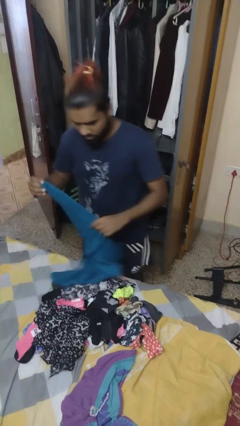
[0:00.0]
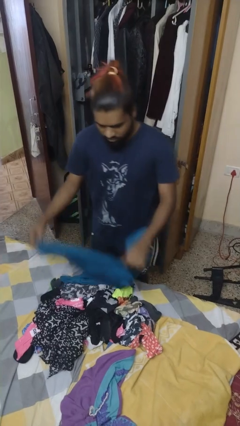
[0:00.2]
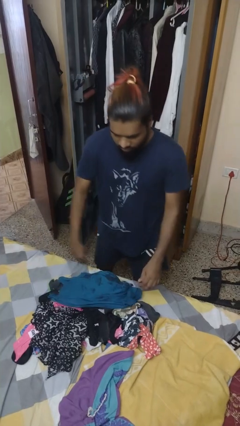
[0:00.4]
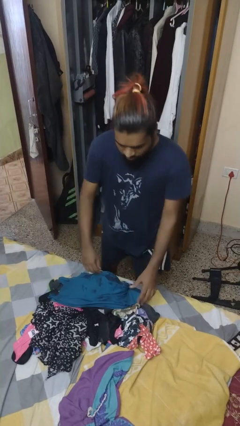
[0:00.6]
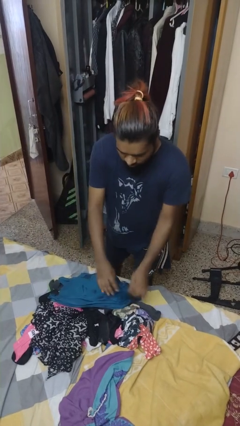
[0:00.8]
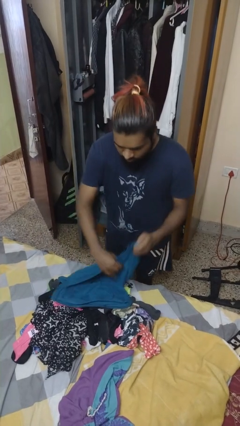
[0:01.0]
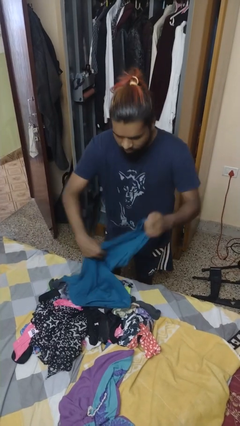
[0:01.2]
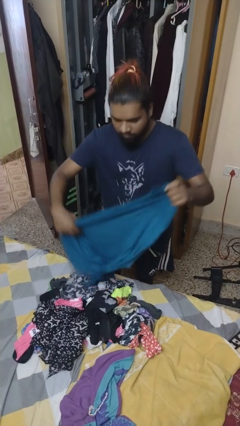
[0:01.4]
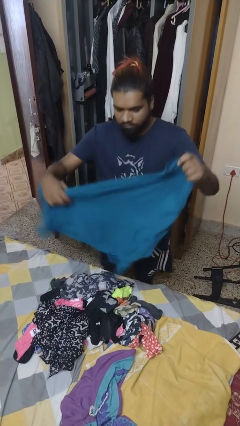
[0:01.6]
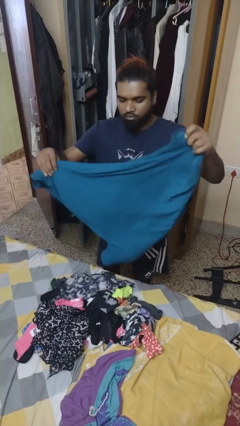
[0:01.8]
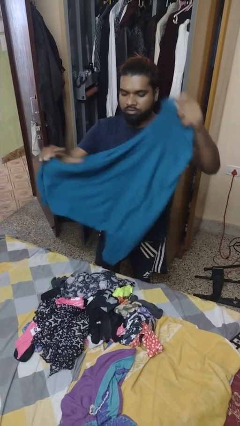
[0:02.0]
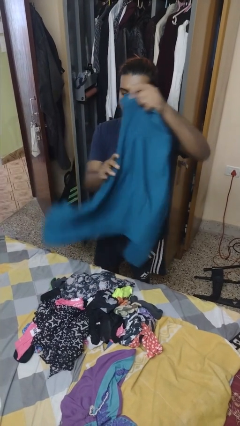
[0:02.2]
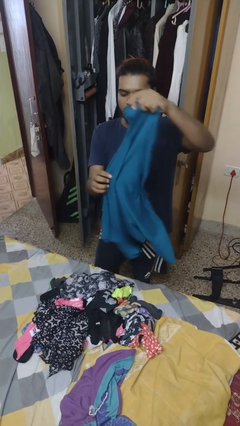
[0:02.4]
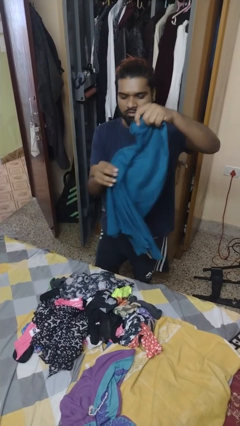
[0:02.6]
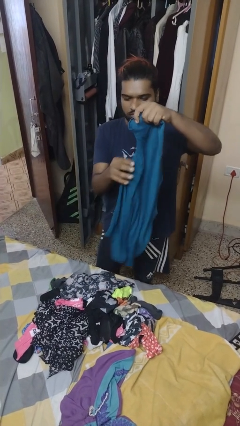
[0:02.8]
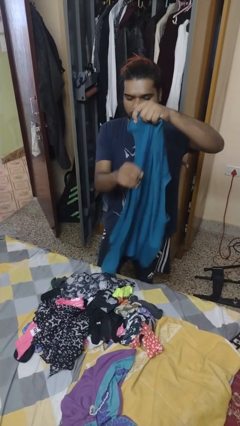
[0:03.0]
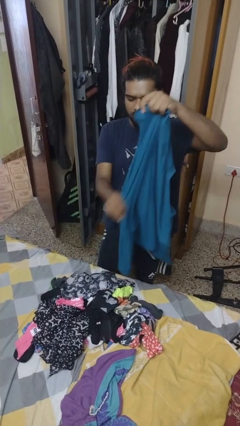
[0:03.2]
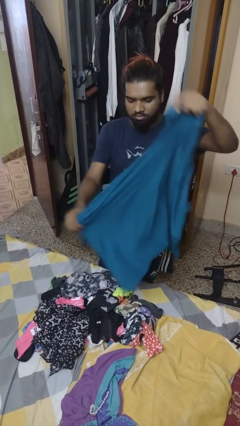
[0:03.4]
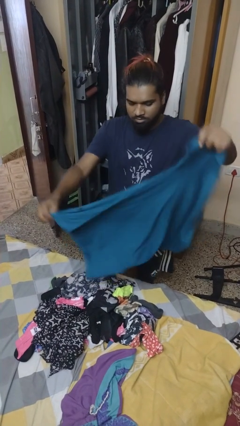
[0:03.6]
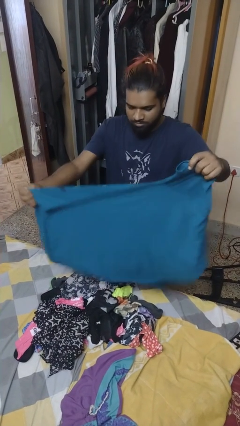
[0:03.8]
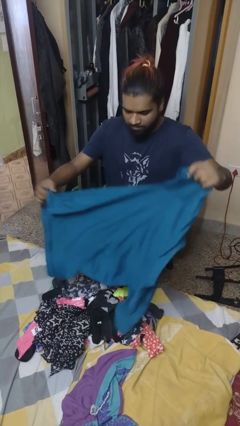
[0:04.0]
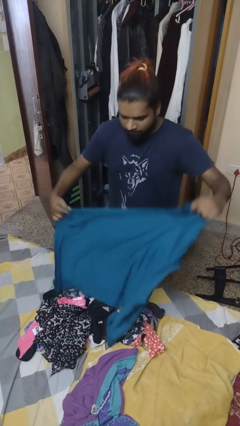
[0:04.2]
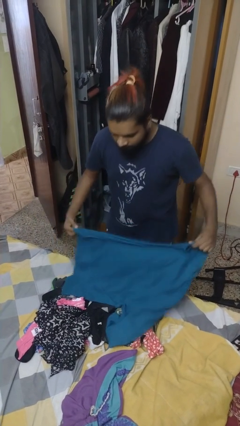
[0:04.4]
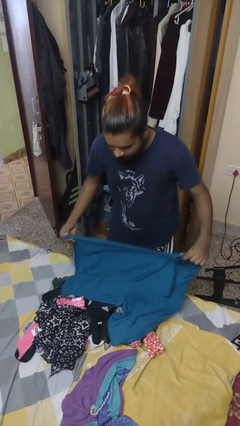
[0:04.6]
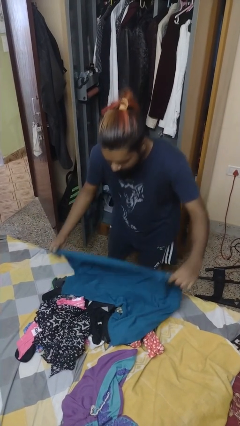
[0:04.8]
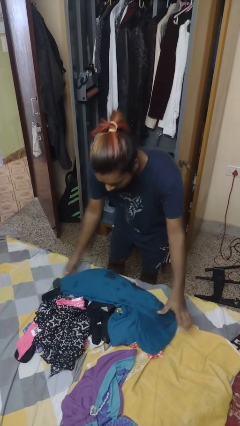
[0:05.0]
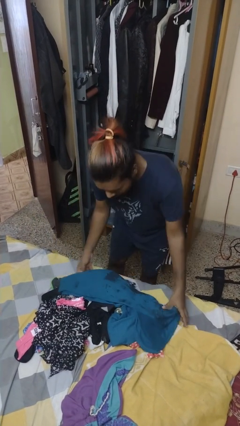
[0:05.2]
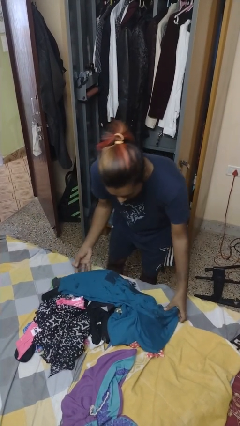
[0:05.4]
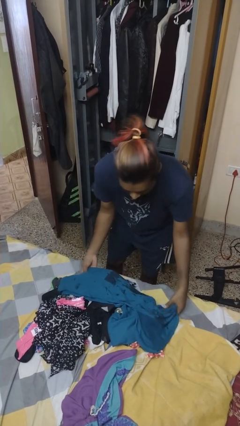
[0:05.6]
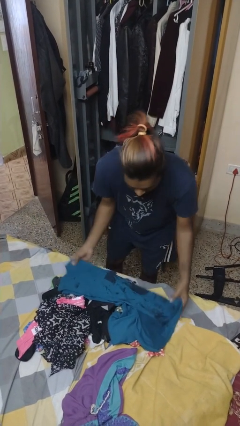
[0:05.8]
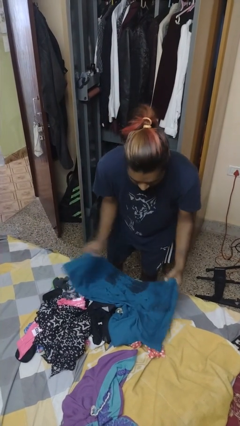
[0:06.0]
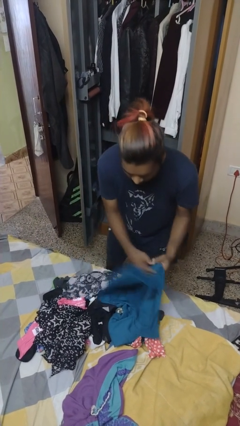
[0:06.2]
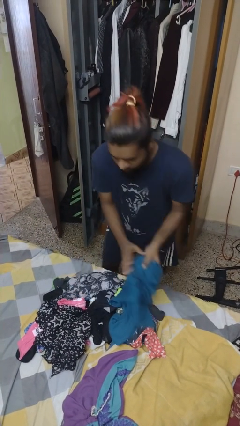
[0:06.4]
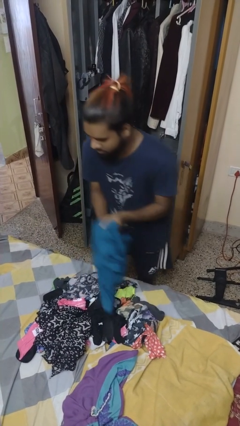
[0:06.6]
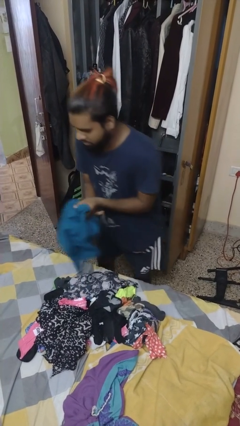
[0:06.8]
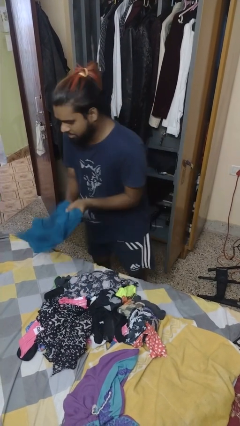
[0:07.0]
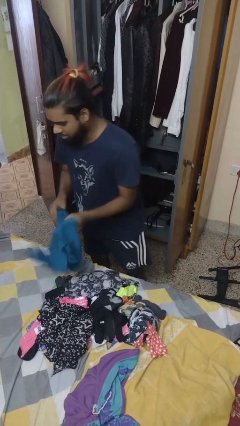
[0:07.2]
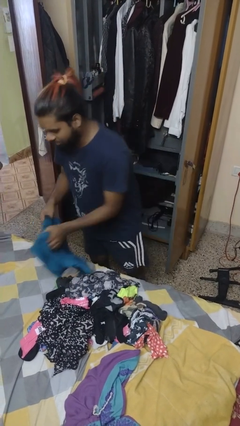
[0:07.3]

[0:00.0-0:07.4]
person folds shirt

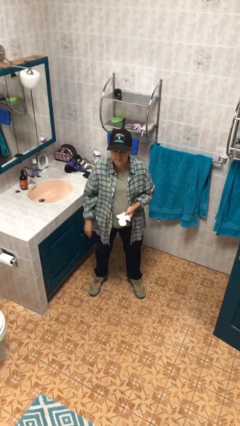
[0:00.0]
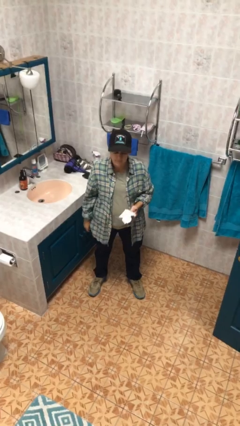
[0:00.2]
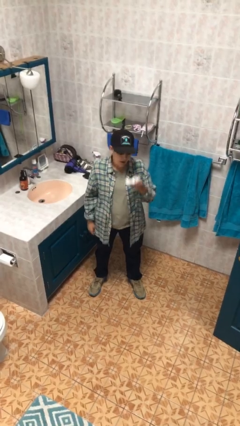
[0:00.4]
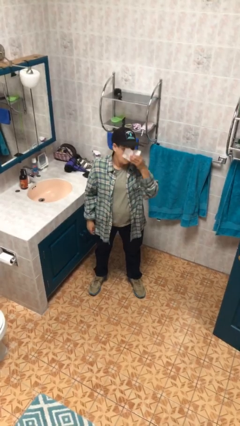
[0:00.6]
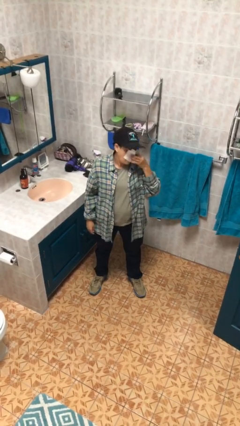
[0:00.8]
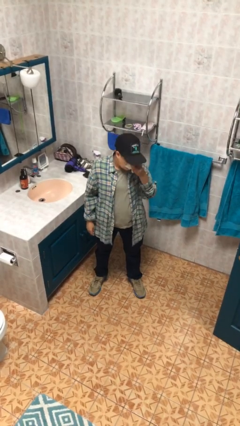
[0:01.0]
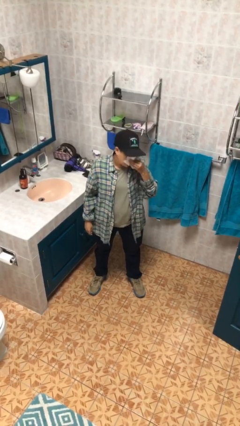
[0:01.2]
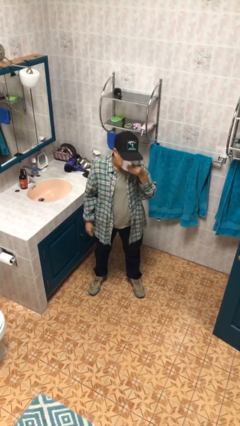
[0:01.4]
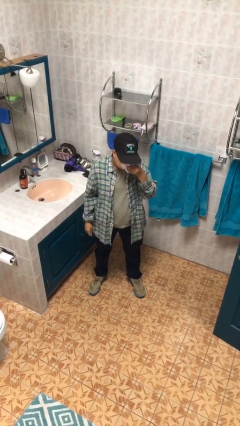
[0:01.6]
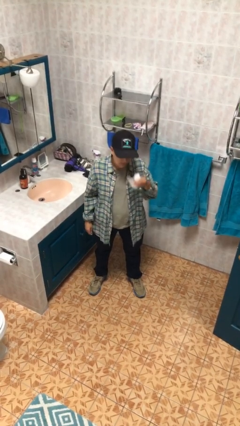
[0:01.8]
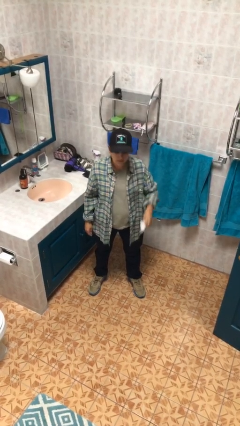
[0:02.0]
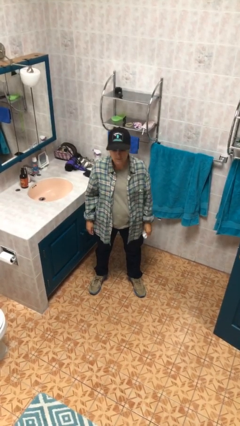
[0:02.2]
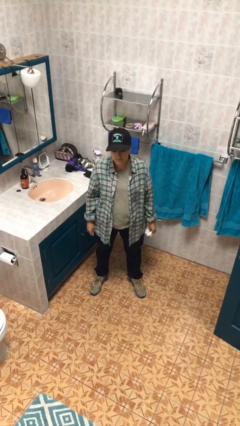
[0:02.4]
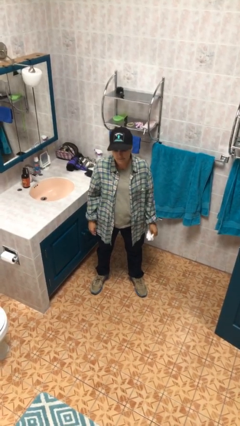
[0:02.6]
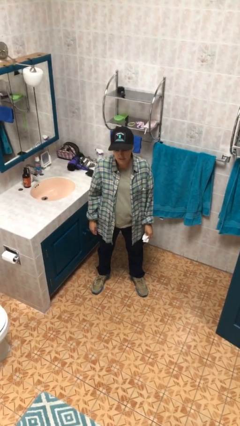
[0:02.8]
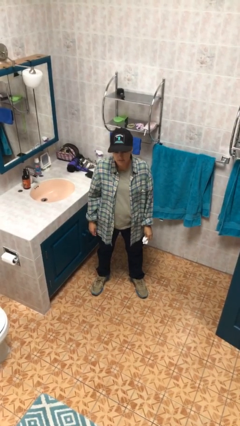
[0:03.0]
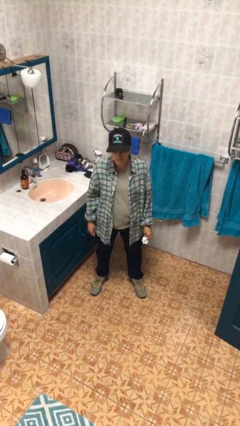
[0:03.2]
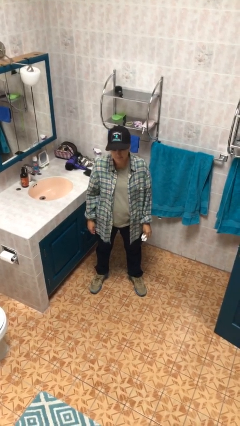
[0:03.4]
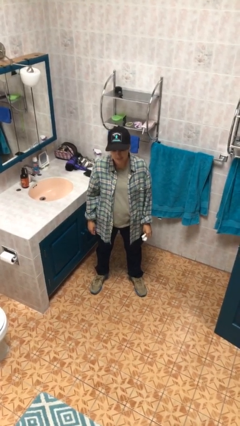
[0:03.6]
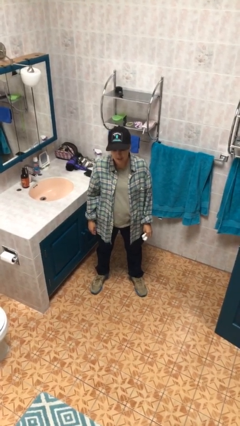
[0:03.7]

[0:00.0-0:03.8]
person blows nose

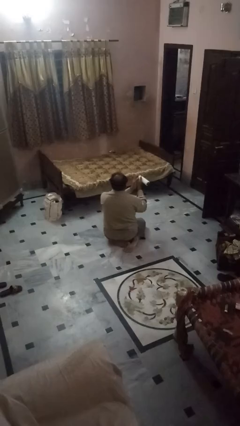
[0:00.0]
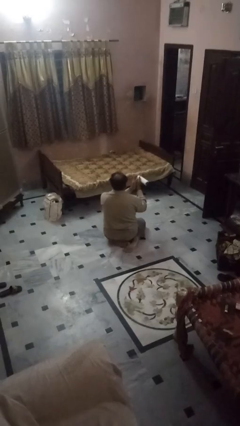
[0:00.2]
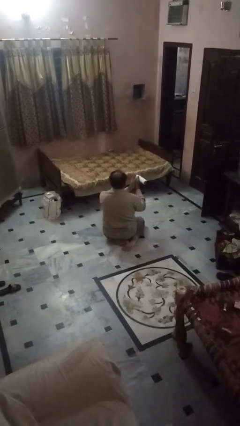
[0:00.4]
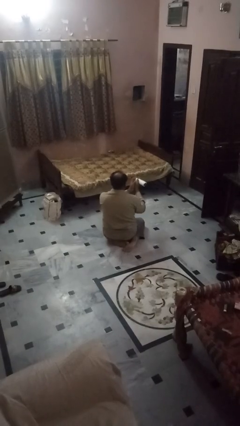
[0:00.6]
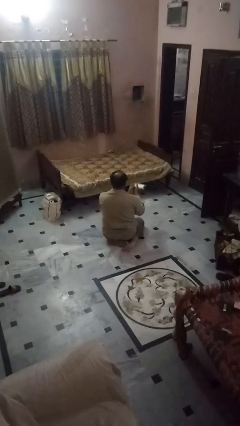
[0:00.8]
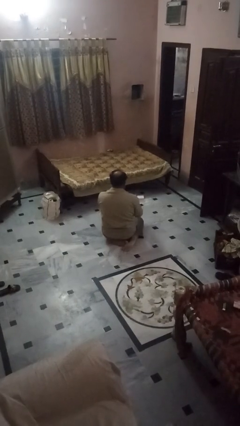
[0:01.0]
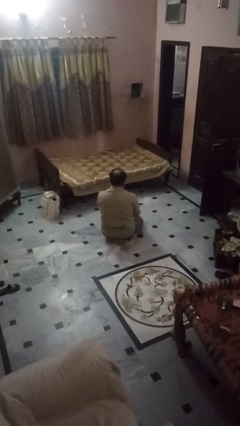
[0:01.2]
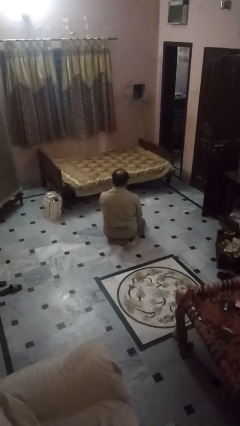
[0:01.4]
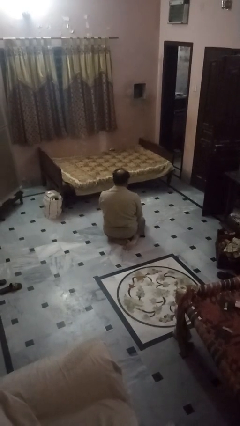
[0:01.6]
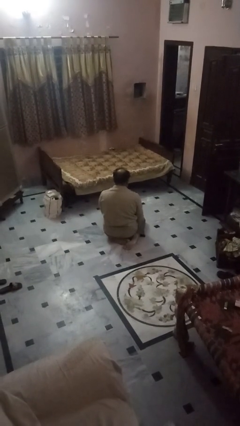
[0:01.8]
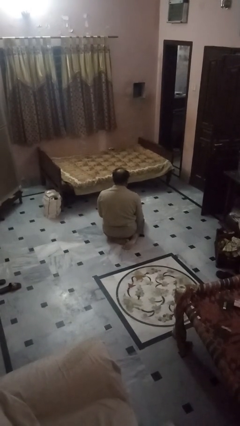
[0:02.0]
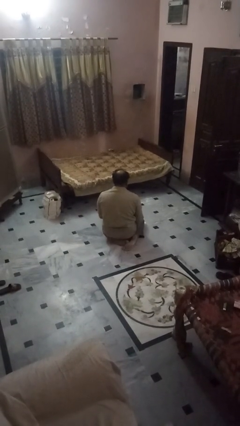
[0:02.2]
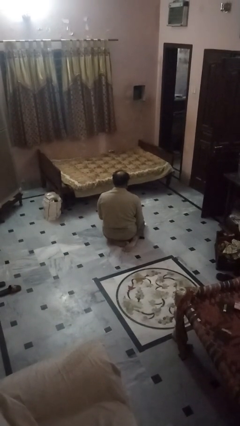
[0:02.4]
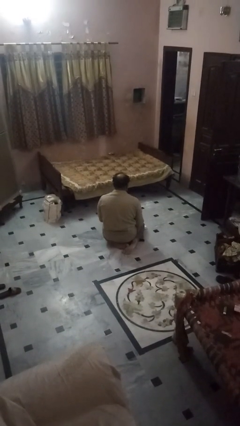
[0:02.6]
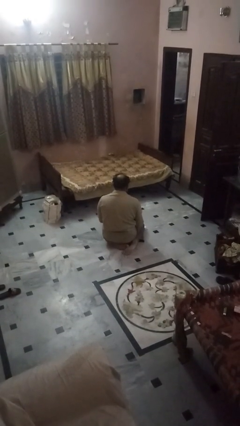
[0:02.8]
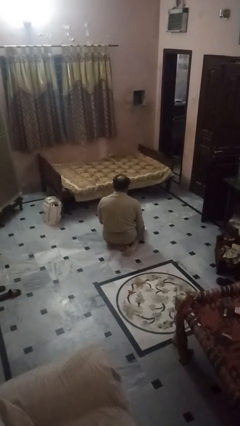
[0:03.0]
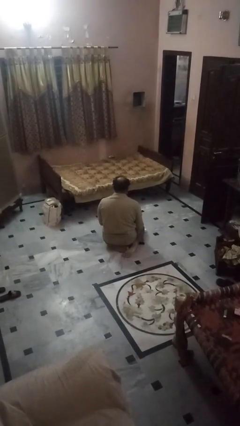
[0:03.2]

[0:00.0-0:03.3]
person catches dropped object

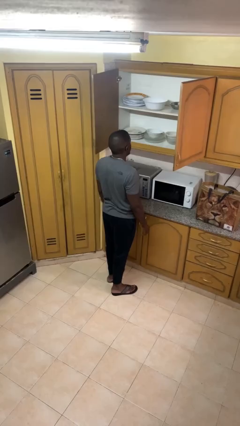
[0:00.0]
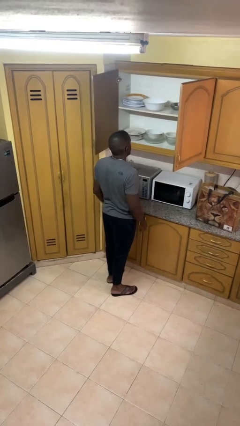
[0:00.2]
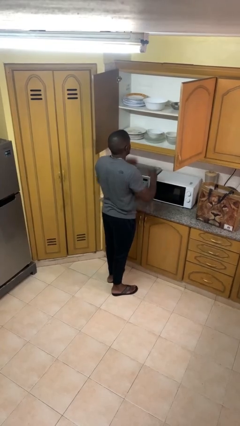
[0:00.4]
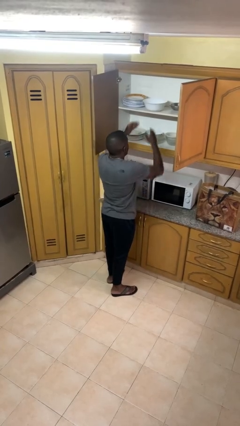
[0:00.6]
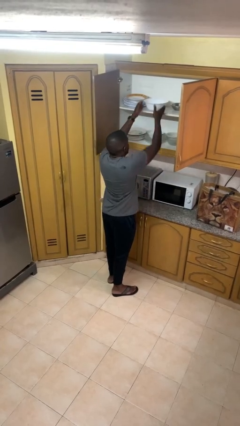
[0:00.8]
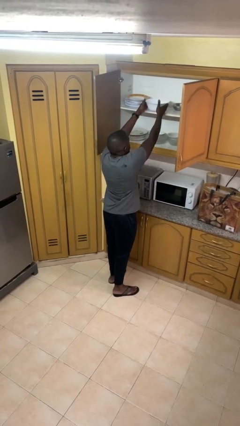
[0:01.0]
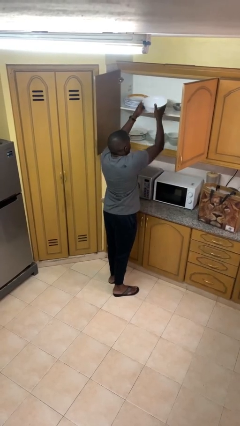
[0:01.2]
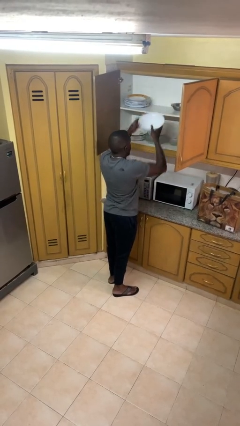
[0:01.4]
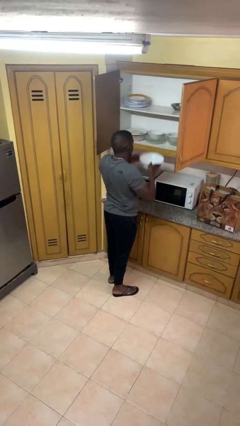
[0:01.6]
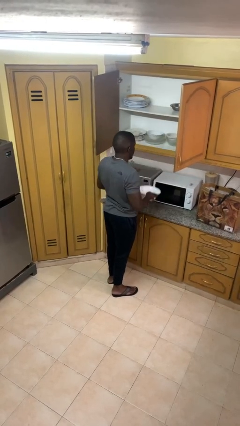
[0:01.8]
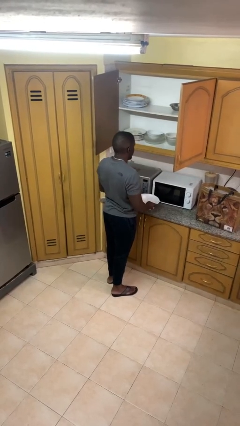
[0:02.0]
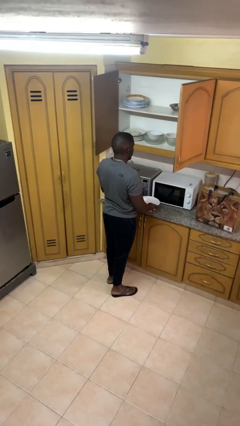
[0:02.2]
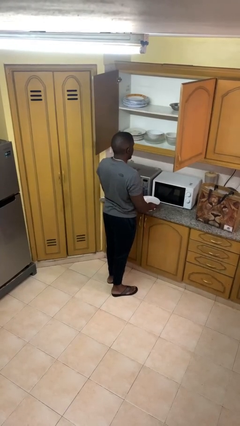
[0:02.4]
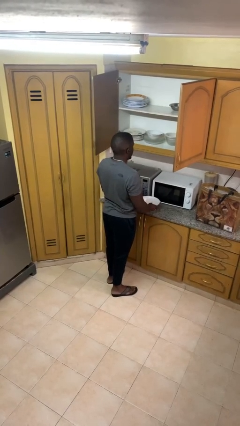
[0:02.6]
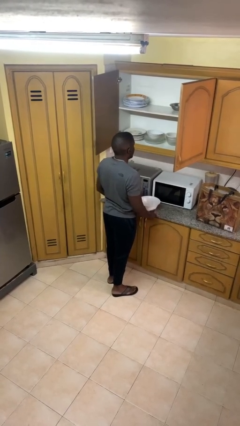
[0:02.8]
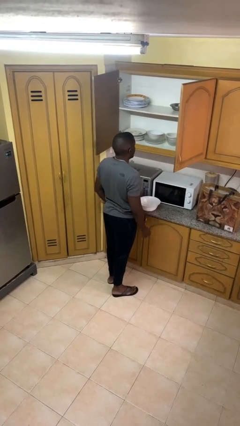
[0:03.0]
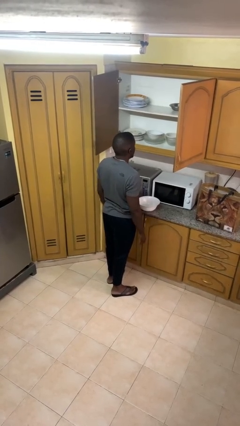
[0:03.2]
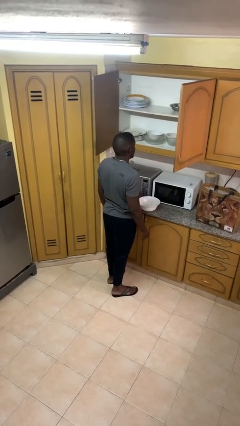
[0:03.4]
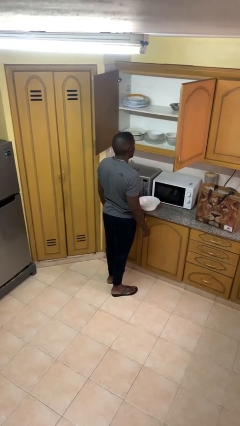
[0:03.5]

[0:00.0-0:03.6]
person takes object from cabinet

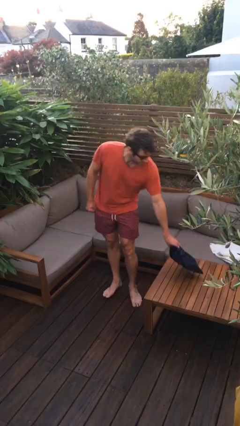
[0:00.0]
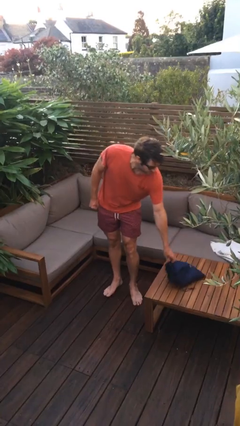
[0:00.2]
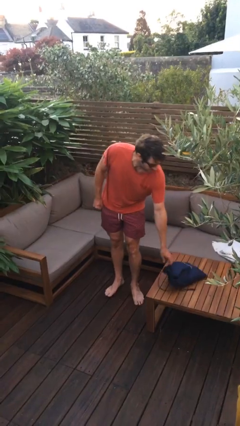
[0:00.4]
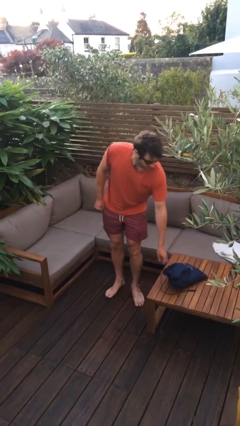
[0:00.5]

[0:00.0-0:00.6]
person puts down object on table
